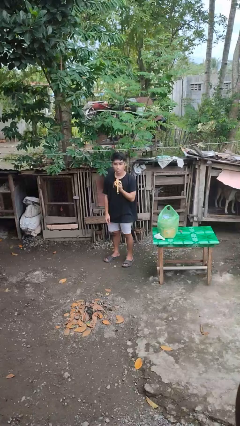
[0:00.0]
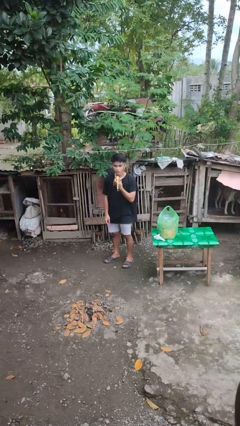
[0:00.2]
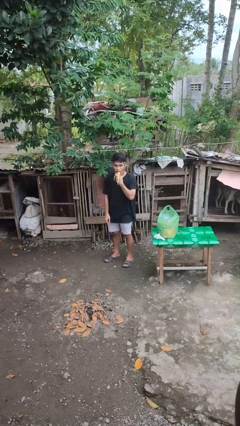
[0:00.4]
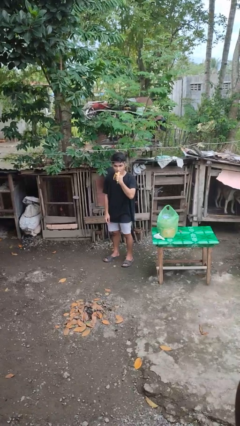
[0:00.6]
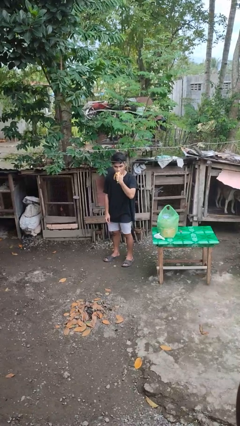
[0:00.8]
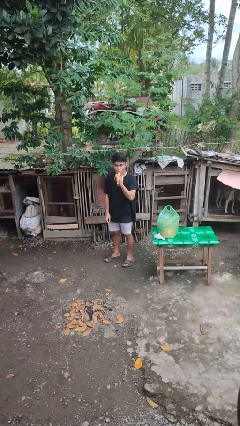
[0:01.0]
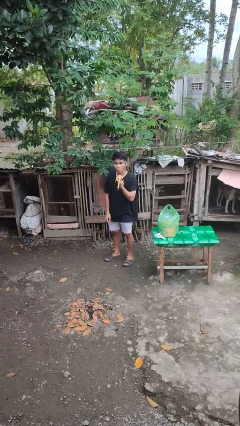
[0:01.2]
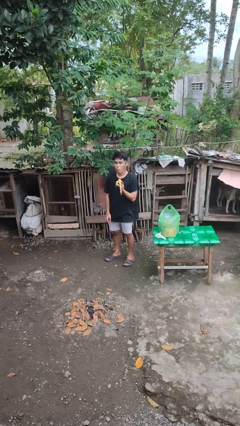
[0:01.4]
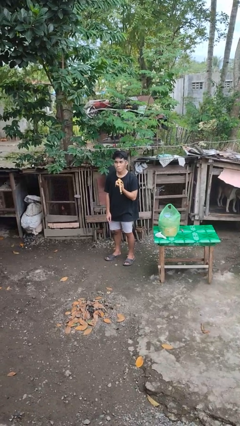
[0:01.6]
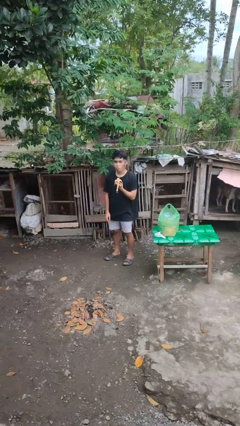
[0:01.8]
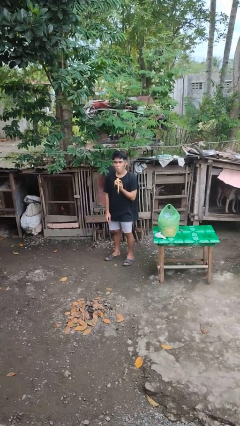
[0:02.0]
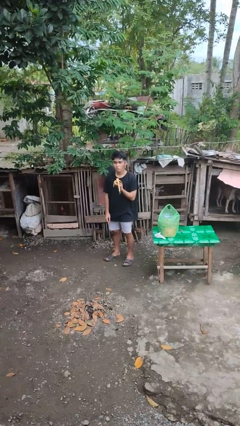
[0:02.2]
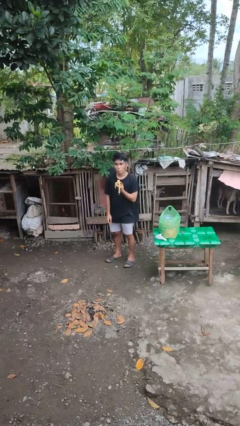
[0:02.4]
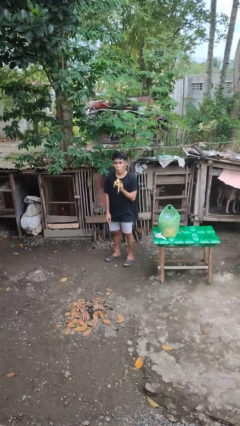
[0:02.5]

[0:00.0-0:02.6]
person eats banana

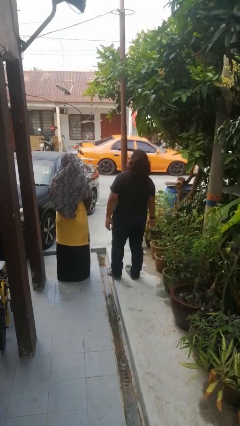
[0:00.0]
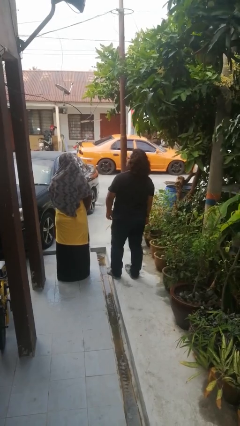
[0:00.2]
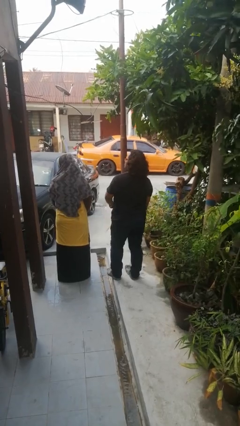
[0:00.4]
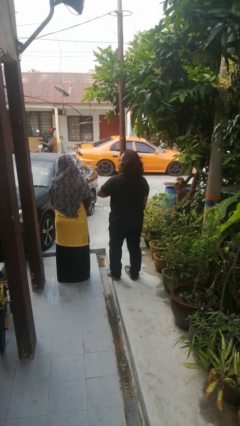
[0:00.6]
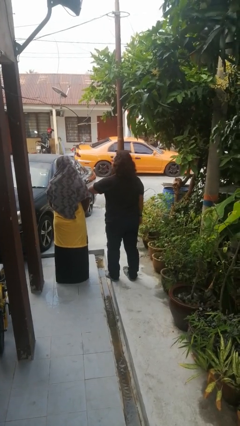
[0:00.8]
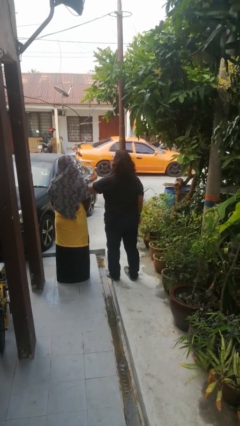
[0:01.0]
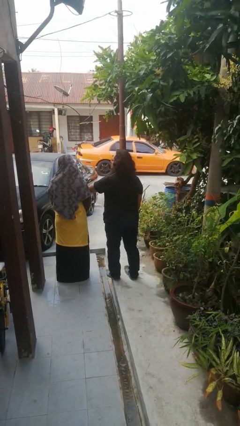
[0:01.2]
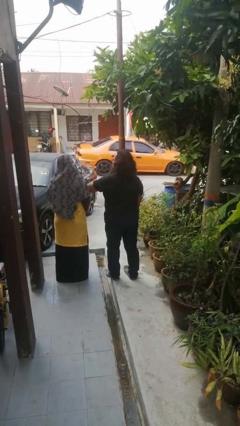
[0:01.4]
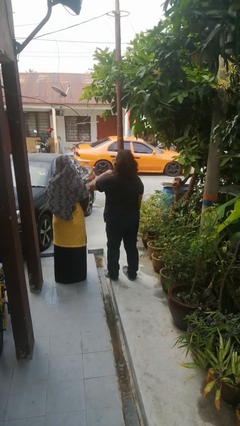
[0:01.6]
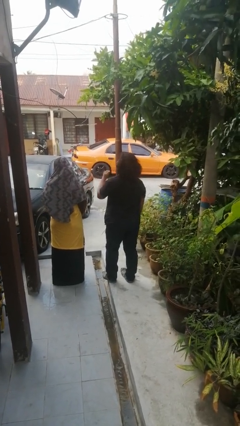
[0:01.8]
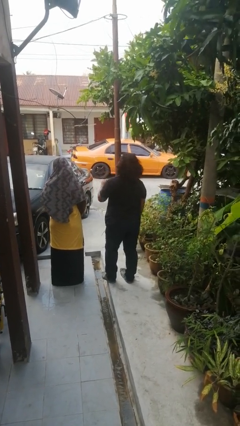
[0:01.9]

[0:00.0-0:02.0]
person nudges person with elbow

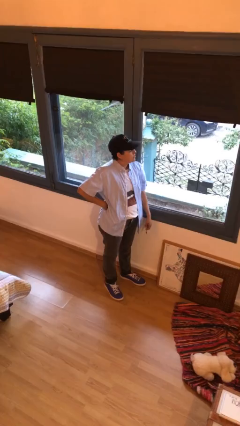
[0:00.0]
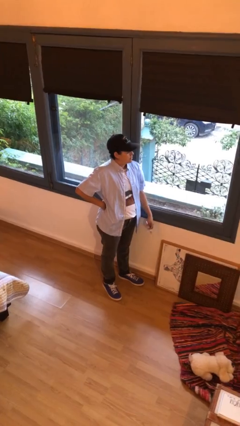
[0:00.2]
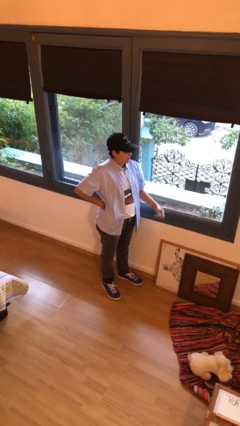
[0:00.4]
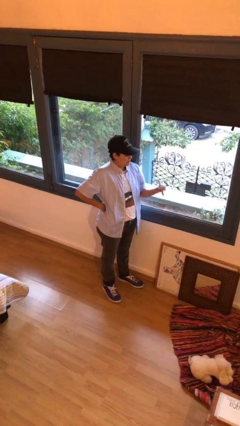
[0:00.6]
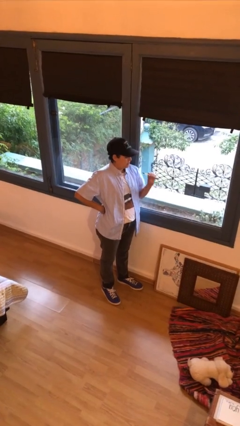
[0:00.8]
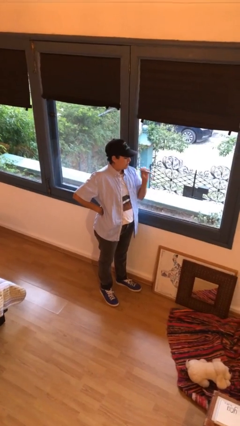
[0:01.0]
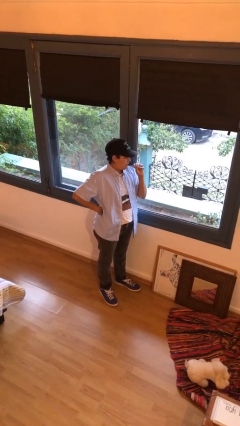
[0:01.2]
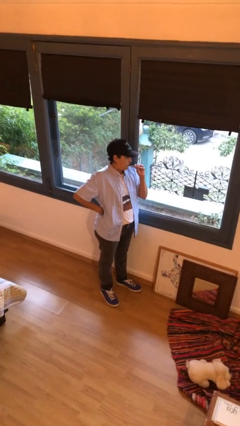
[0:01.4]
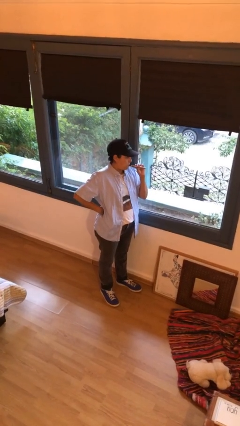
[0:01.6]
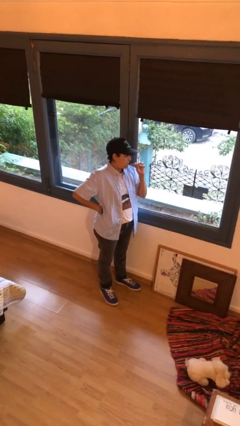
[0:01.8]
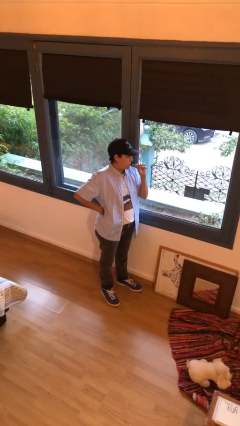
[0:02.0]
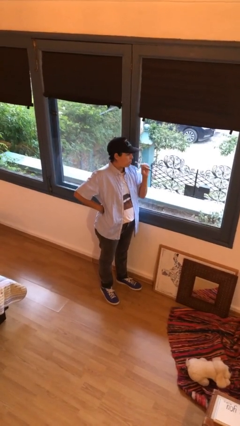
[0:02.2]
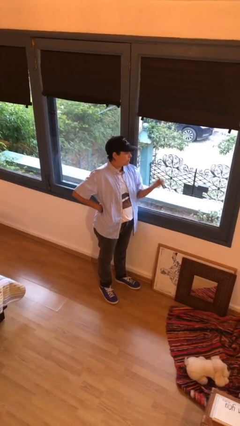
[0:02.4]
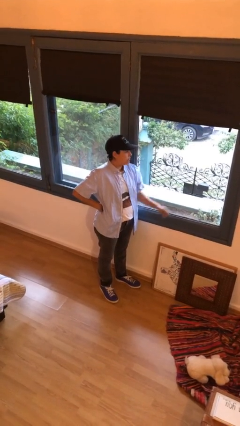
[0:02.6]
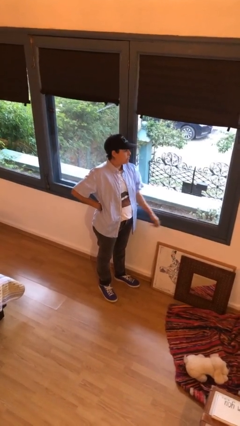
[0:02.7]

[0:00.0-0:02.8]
person vapes

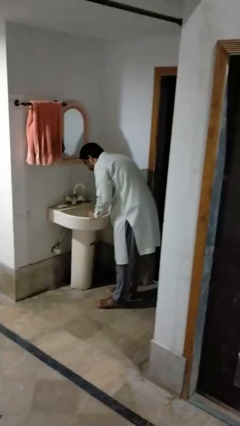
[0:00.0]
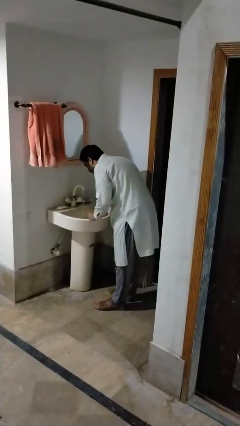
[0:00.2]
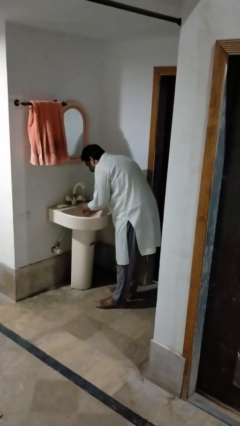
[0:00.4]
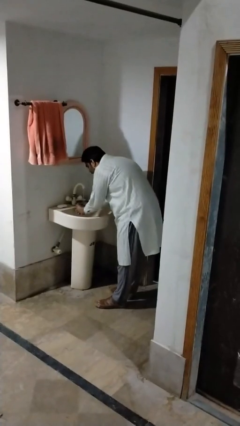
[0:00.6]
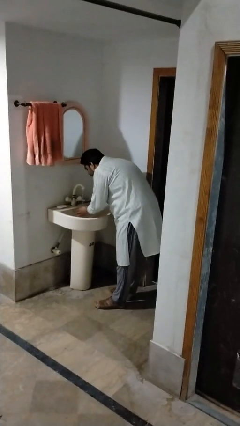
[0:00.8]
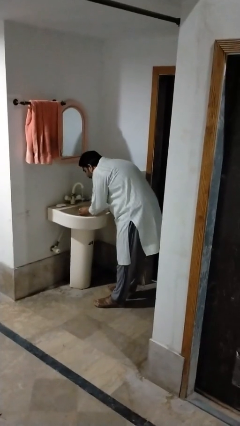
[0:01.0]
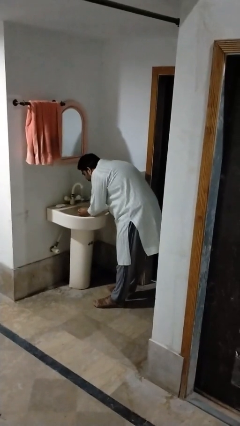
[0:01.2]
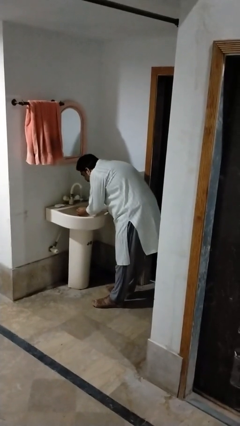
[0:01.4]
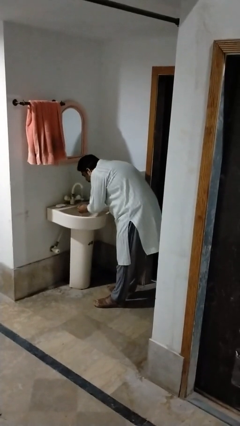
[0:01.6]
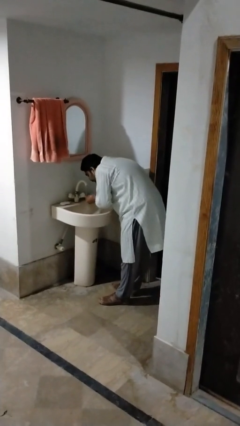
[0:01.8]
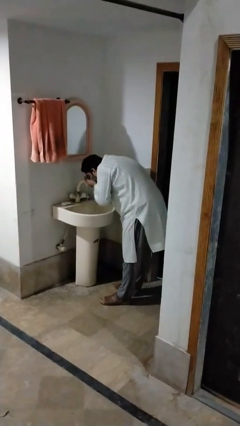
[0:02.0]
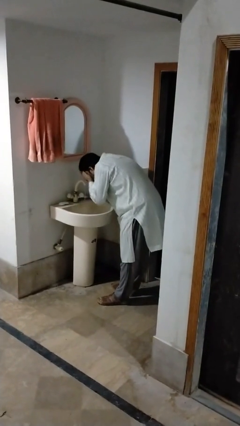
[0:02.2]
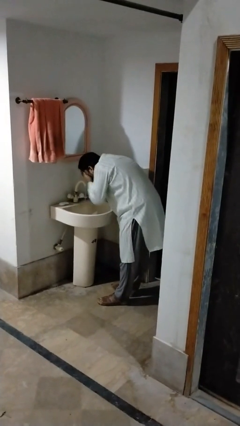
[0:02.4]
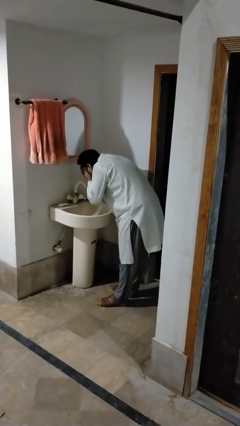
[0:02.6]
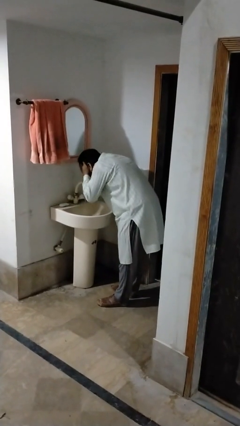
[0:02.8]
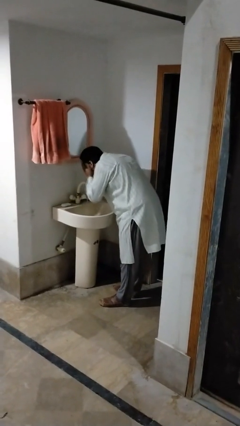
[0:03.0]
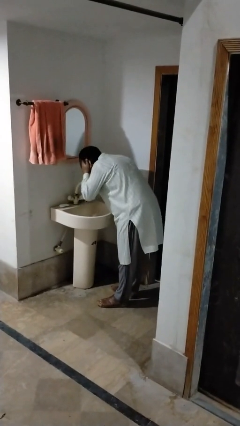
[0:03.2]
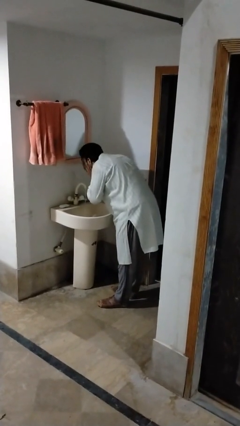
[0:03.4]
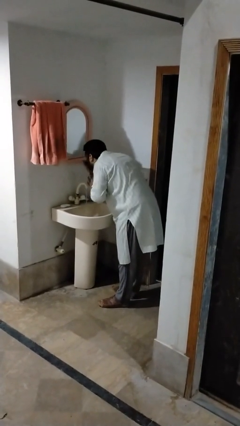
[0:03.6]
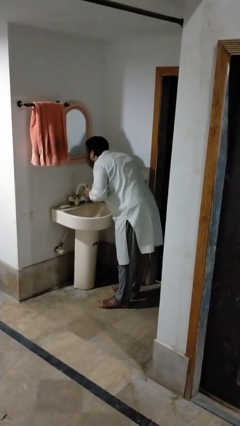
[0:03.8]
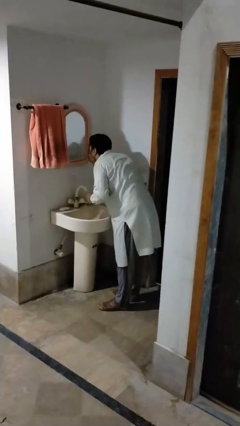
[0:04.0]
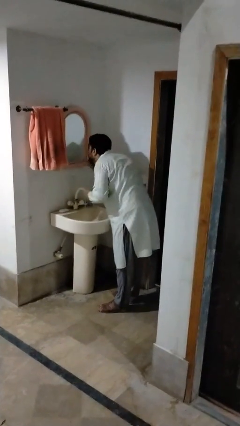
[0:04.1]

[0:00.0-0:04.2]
person washes face

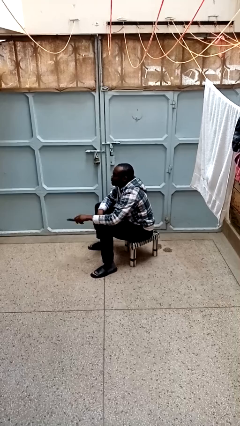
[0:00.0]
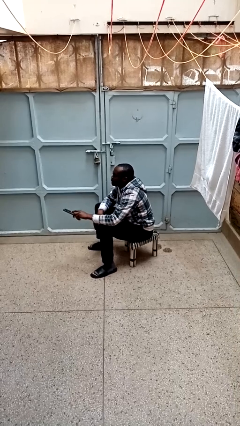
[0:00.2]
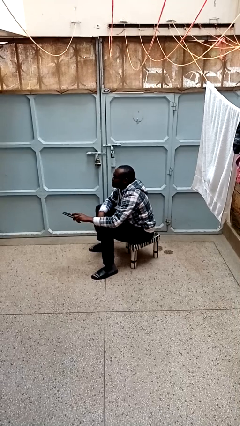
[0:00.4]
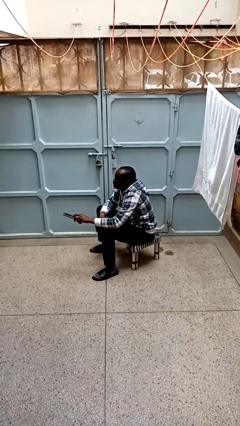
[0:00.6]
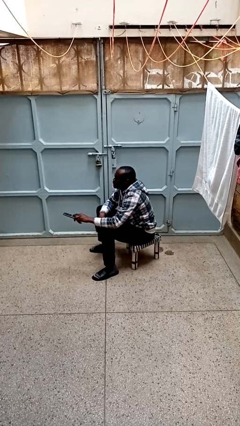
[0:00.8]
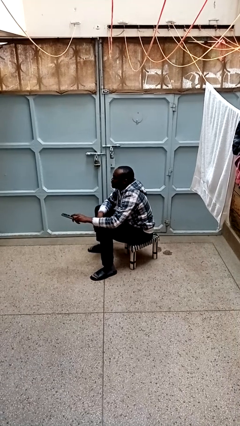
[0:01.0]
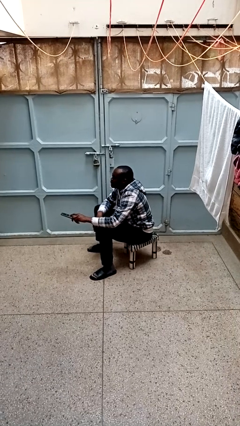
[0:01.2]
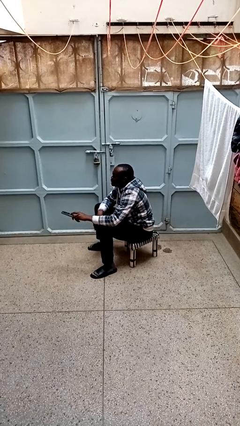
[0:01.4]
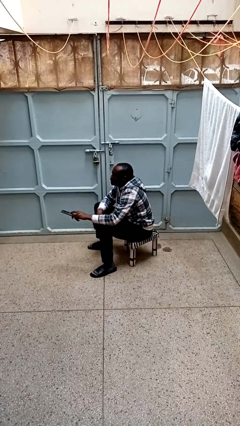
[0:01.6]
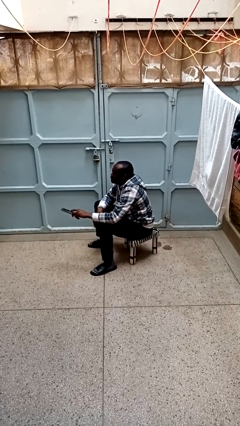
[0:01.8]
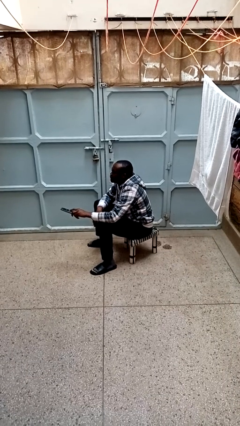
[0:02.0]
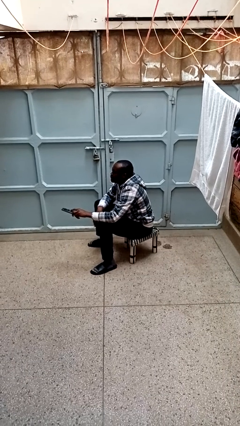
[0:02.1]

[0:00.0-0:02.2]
person uses television remote

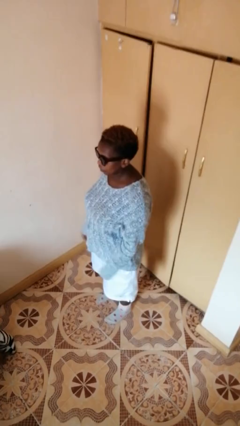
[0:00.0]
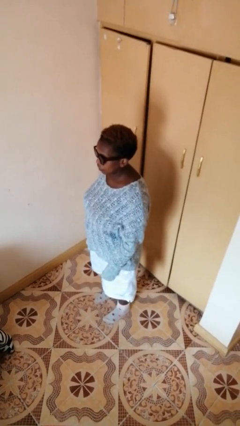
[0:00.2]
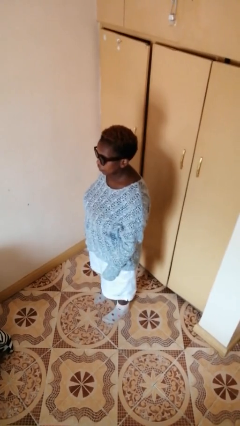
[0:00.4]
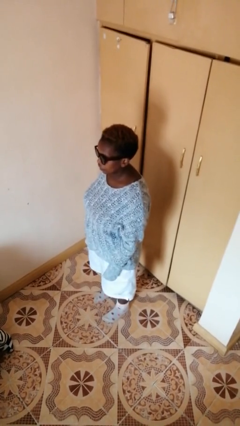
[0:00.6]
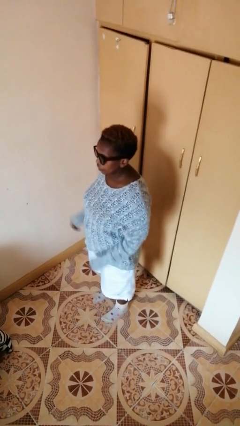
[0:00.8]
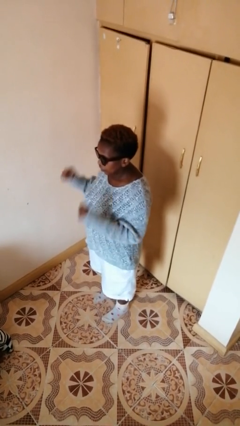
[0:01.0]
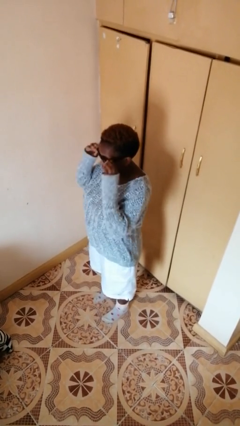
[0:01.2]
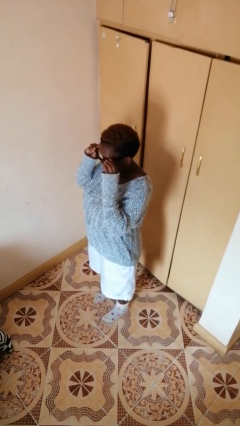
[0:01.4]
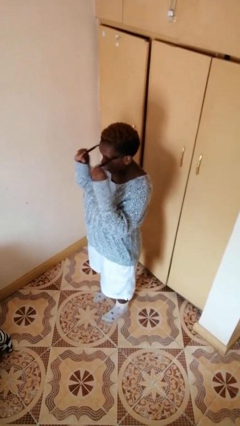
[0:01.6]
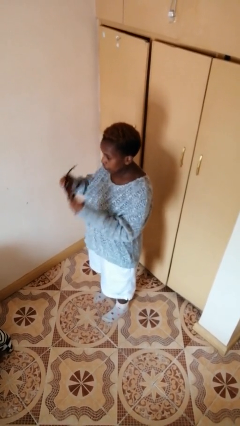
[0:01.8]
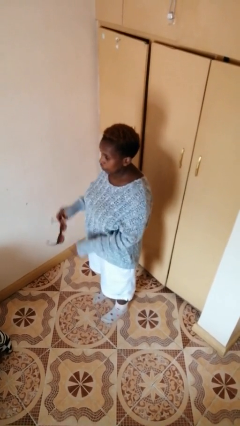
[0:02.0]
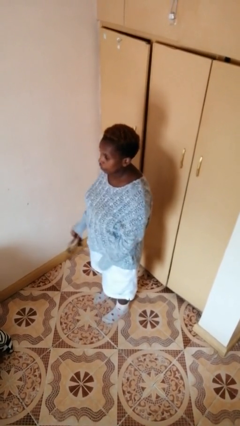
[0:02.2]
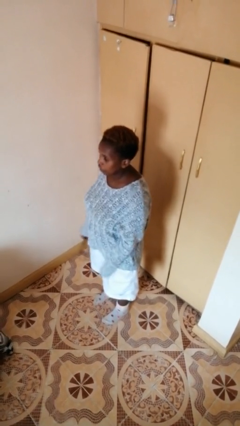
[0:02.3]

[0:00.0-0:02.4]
person takes off sunglasses

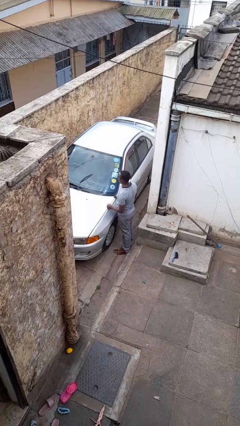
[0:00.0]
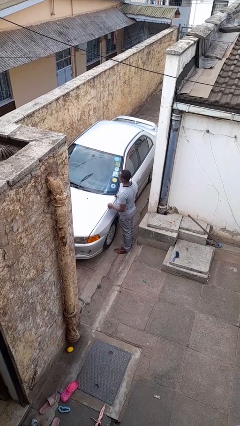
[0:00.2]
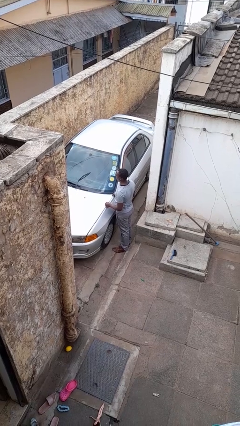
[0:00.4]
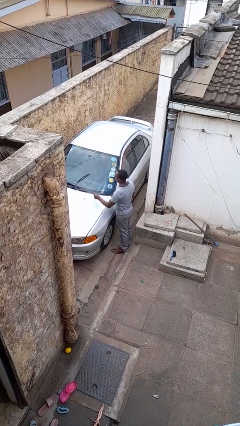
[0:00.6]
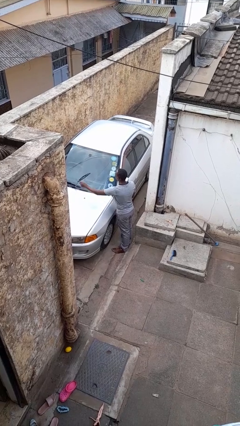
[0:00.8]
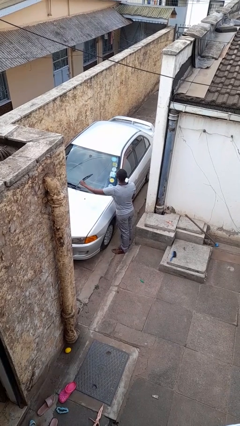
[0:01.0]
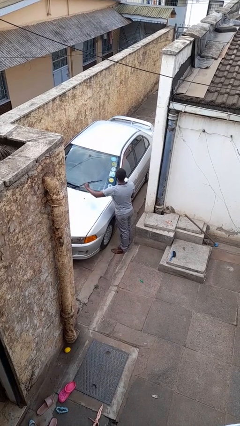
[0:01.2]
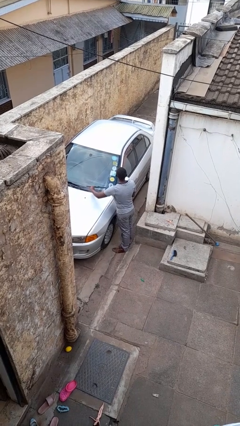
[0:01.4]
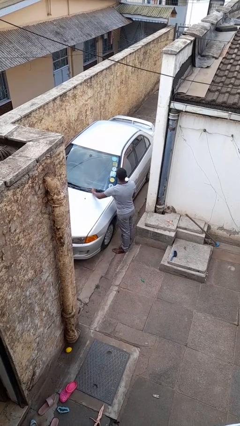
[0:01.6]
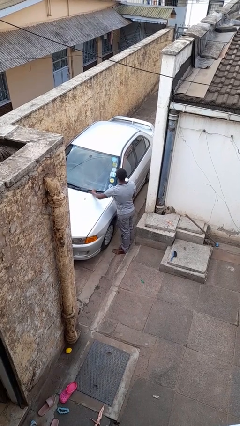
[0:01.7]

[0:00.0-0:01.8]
person flips down car wipers
